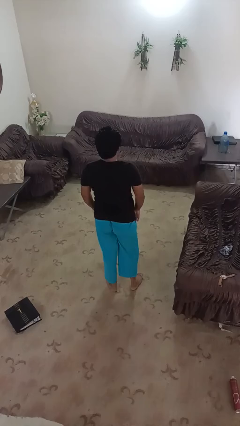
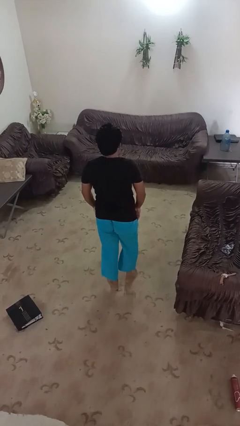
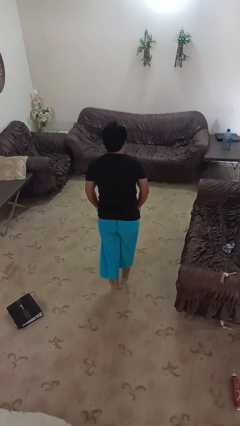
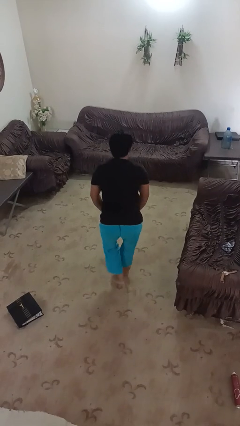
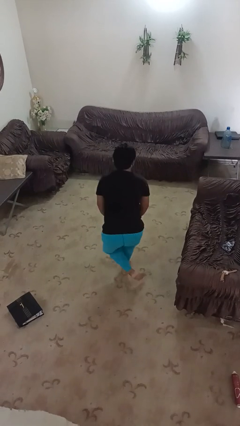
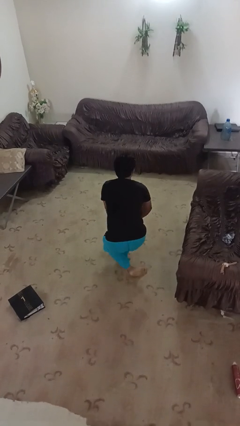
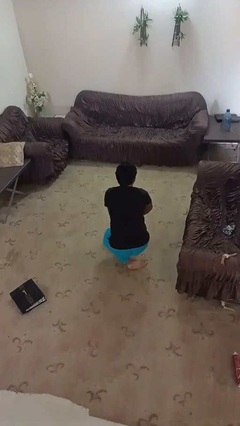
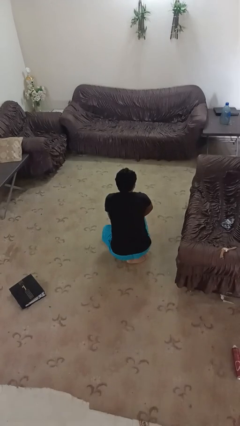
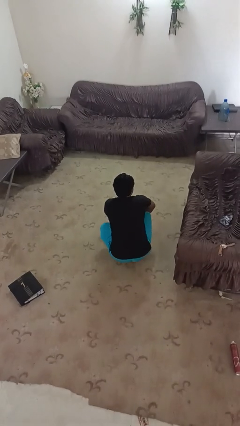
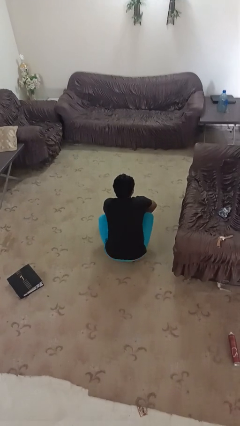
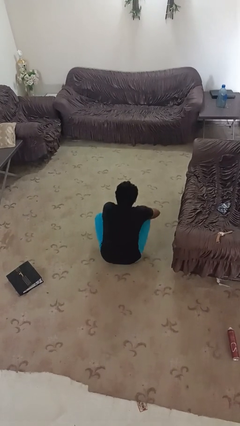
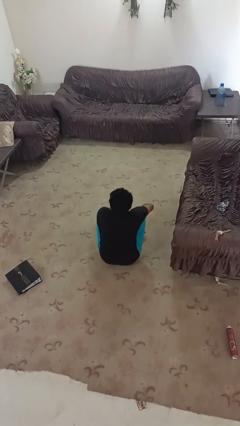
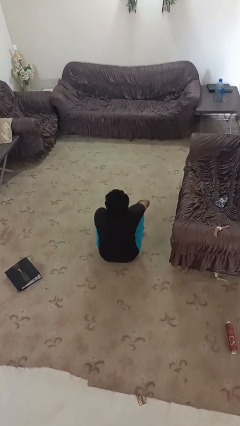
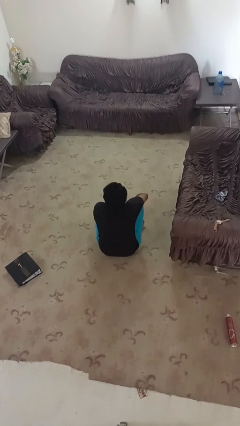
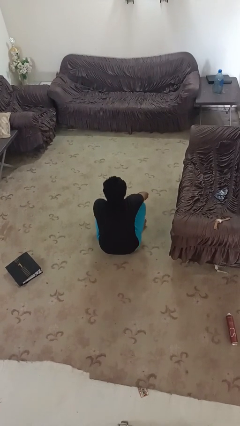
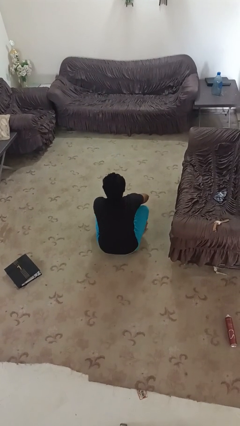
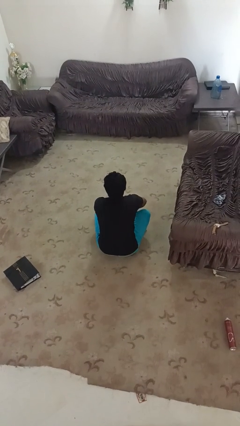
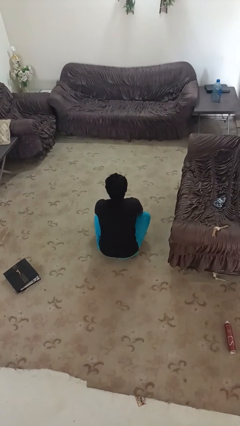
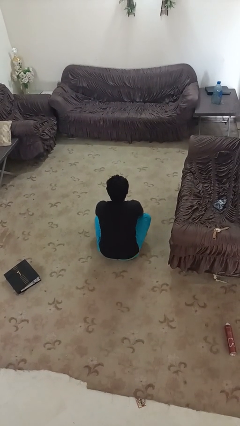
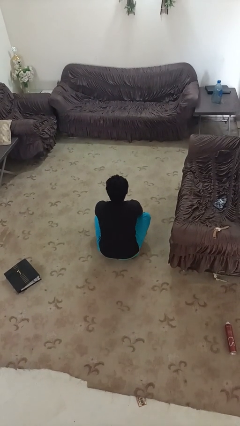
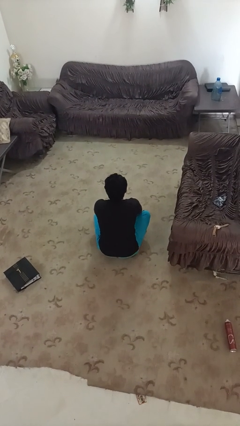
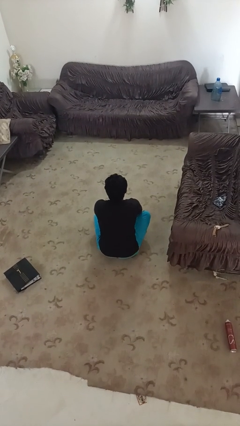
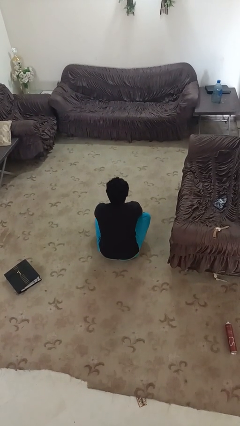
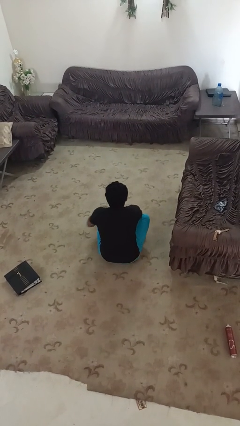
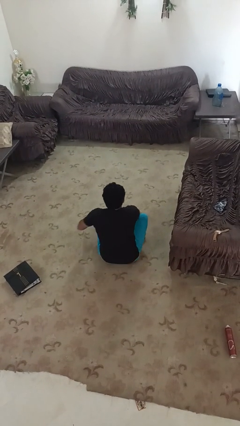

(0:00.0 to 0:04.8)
person sits crisscross

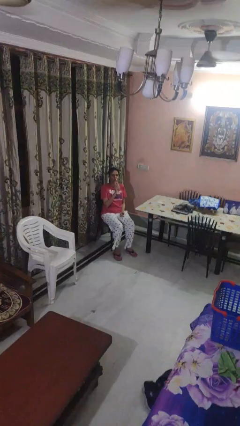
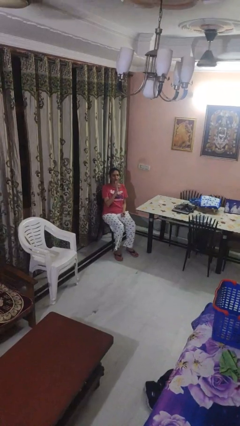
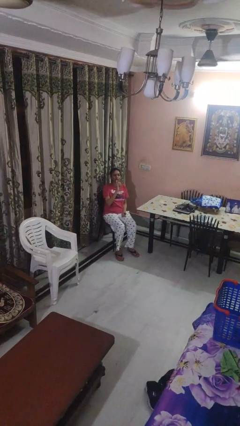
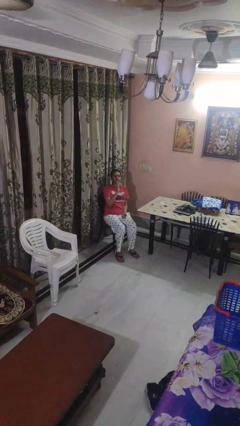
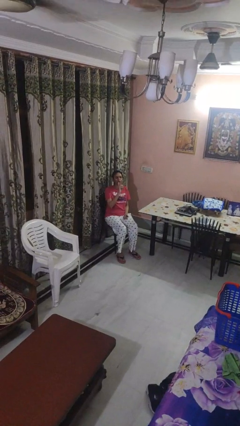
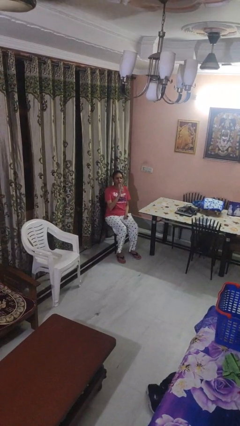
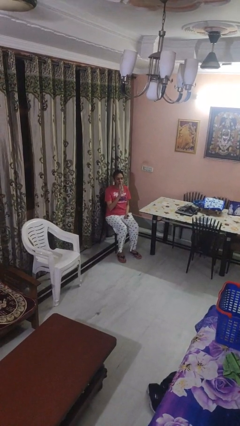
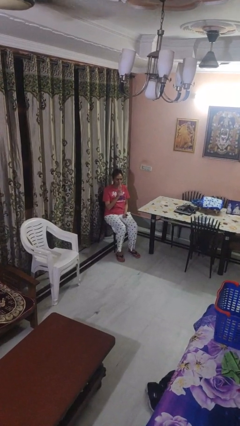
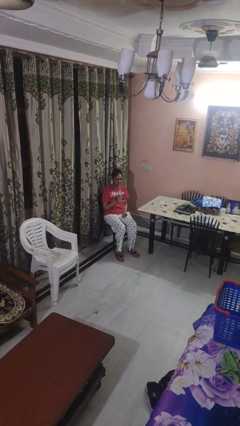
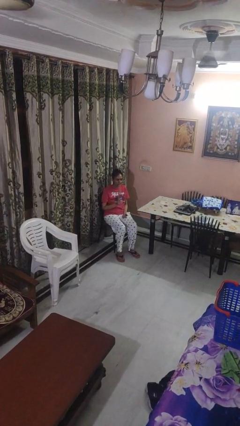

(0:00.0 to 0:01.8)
person drinks from bottle

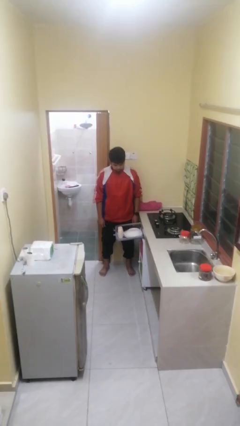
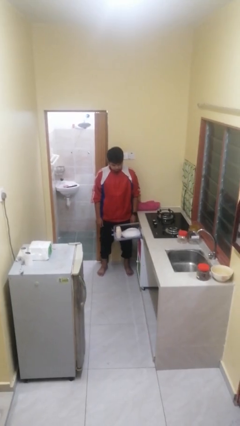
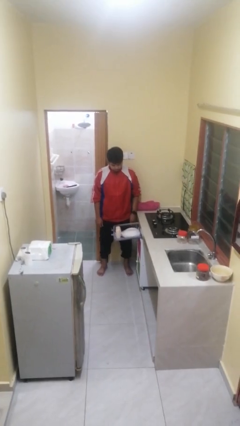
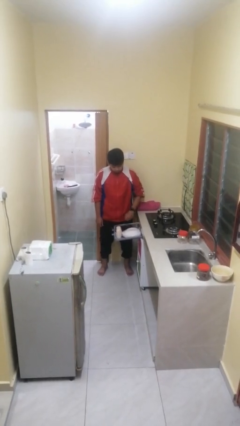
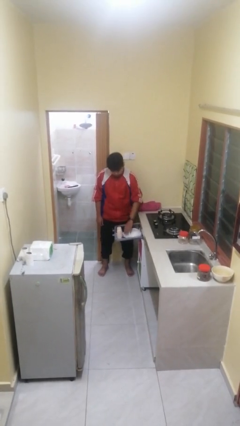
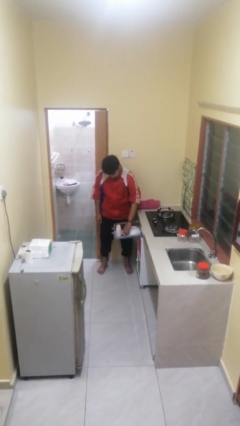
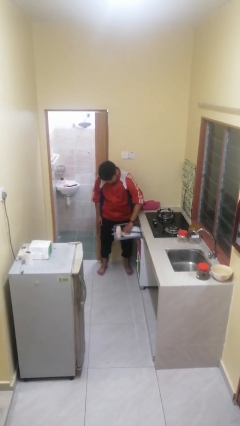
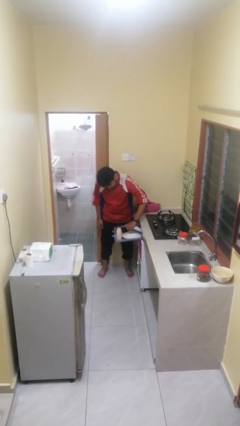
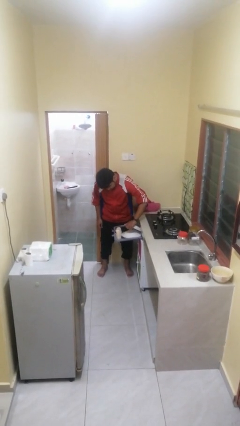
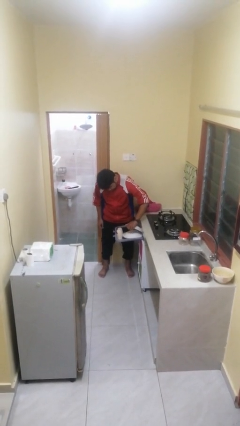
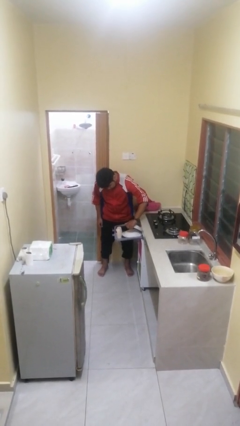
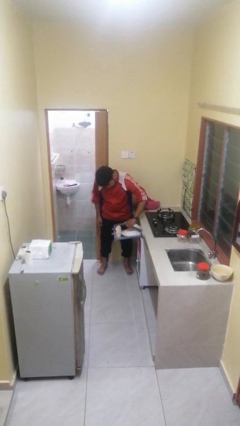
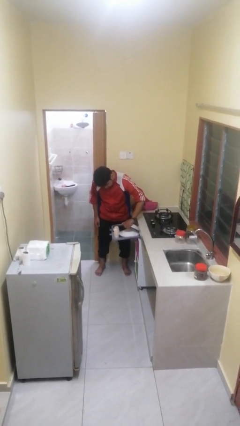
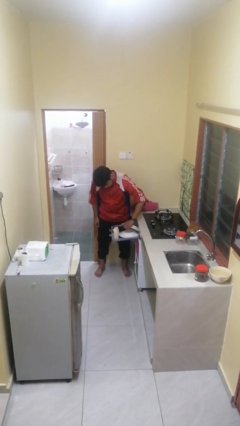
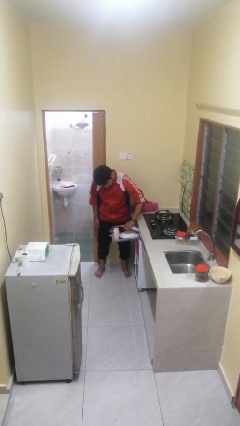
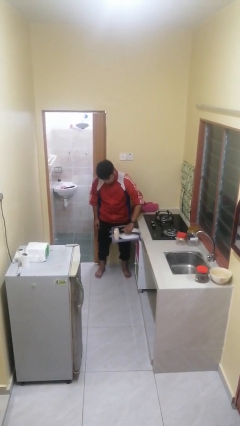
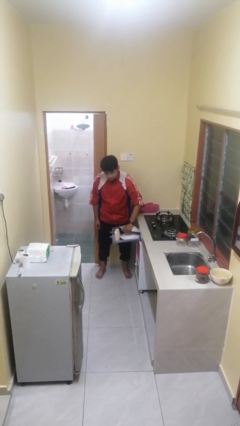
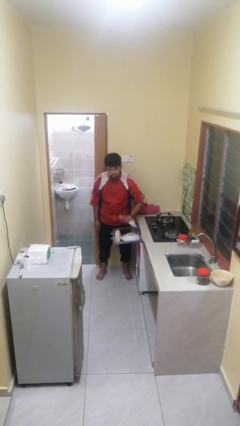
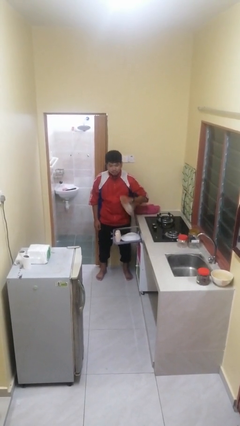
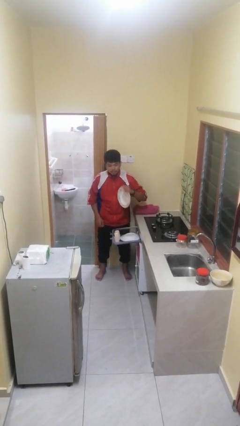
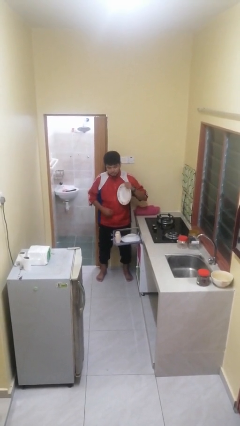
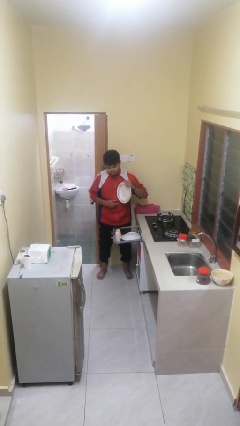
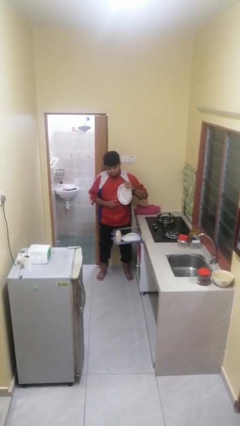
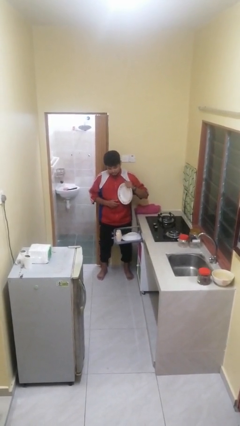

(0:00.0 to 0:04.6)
person takes object from kitchen drawer

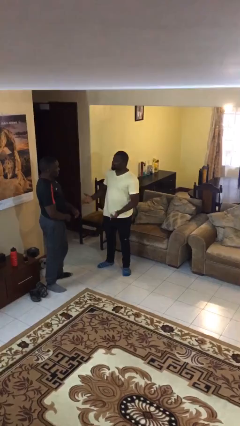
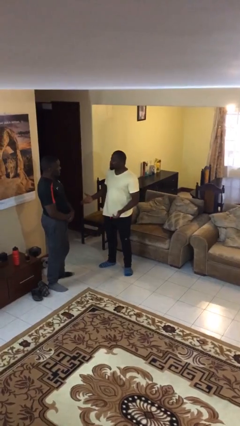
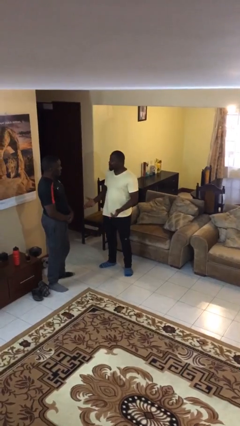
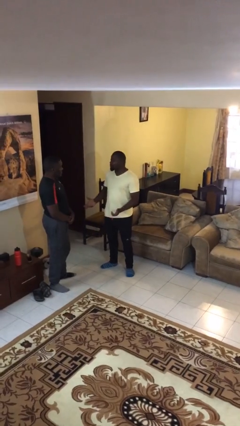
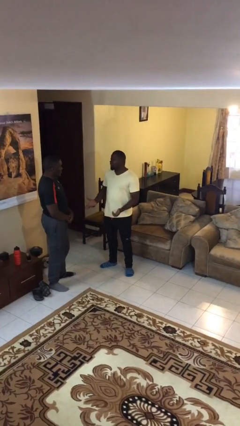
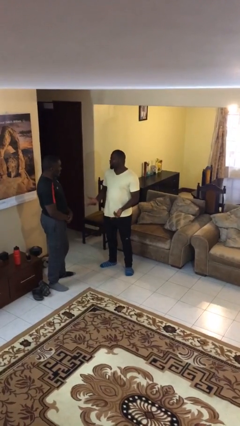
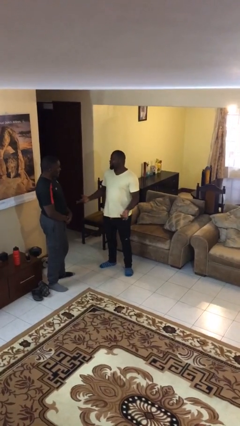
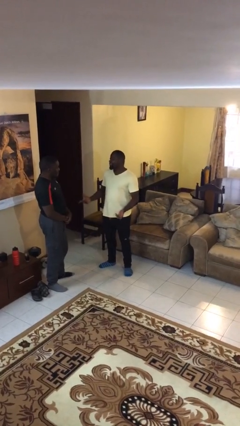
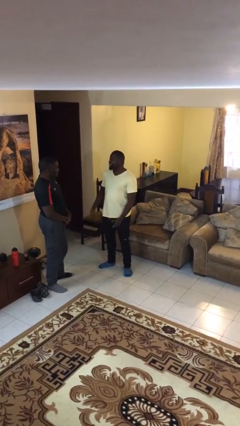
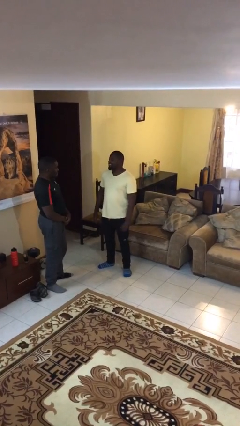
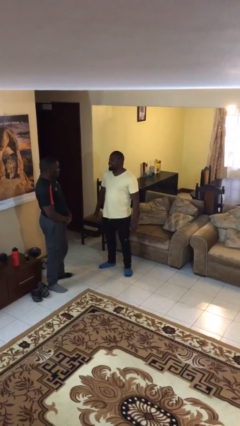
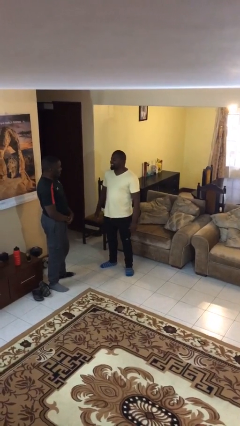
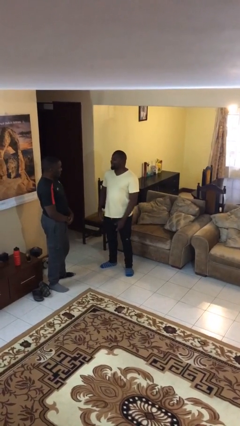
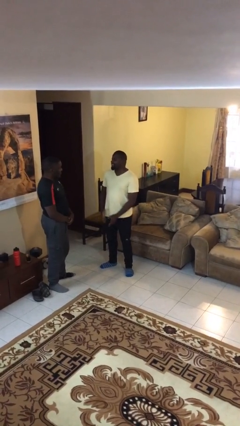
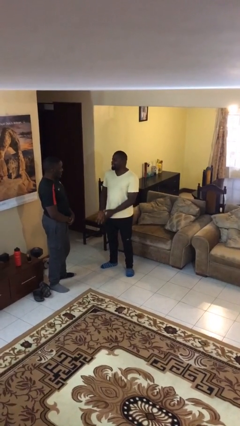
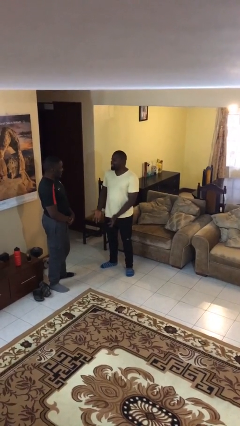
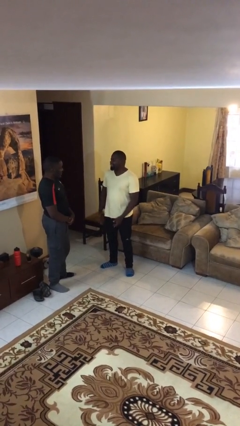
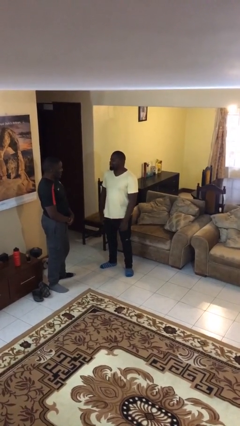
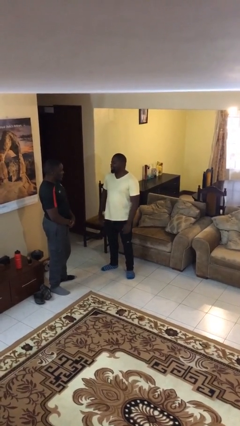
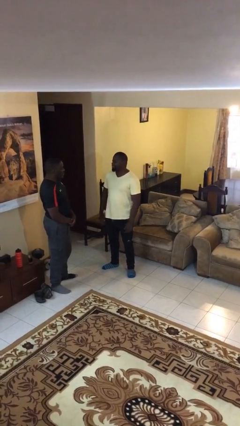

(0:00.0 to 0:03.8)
person talks to person

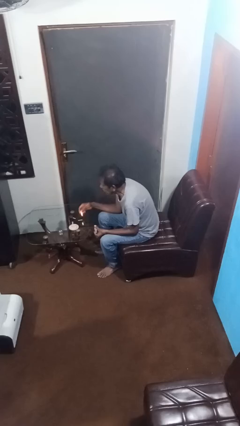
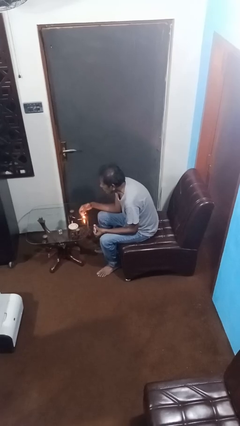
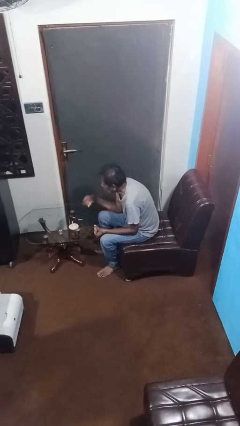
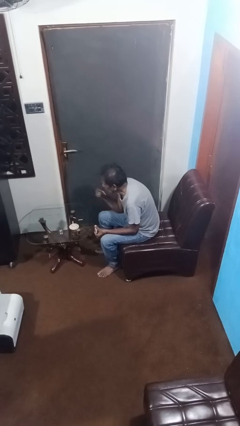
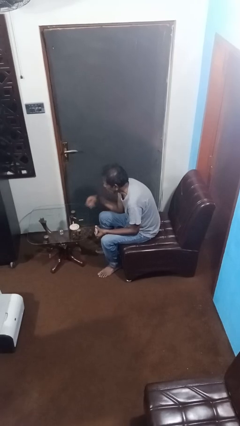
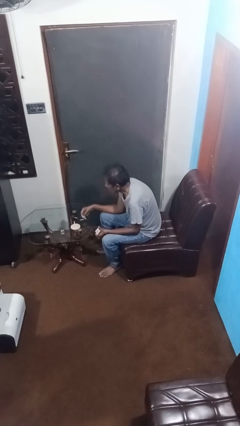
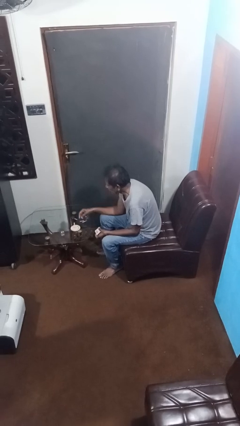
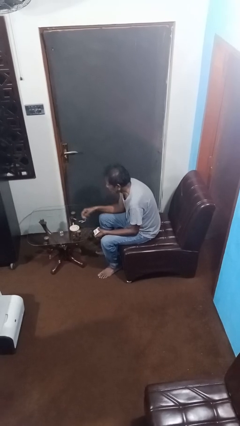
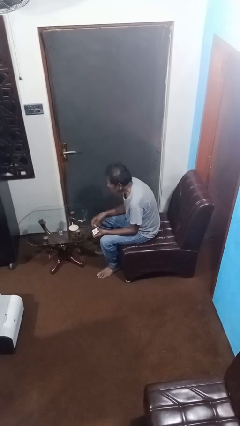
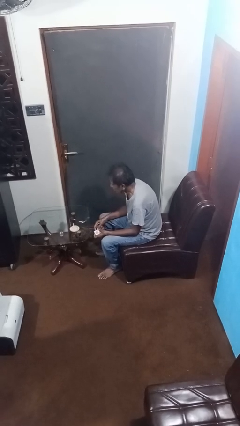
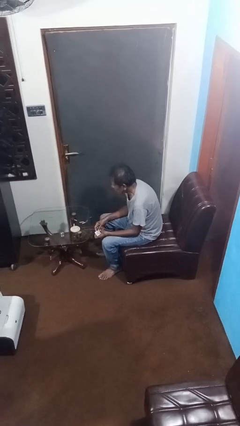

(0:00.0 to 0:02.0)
person extinguishes candle

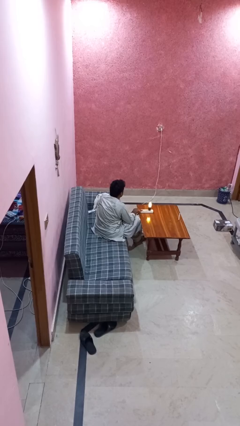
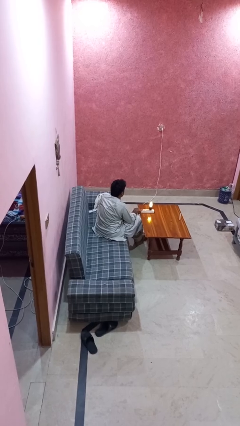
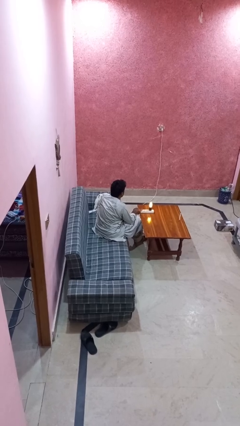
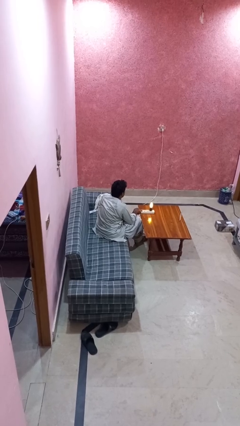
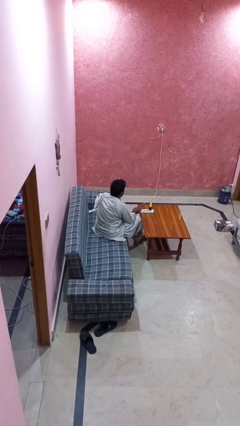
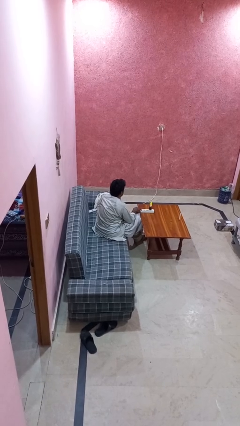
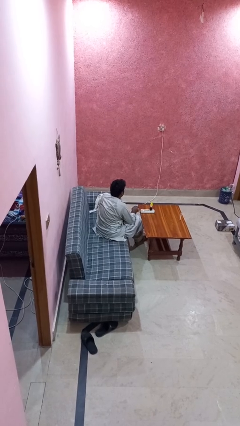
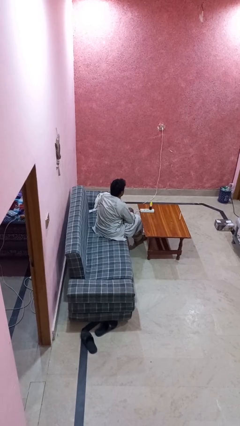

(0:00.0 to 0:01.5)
person turns off lamp
